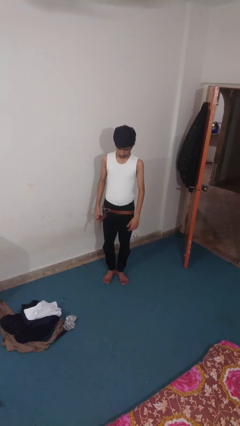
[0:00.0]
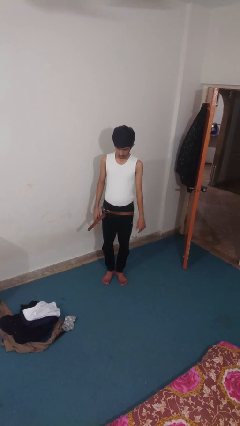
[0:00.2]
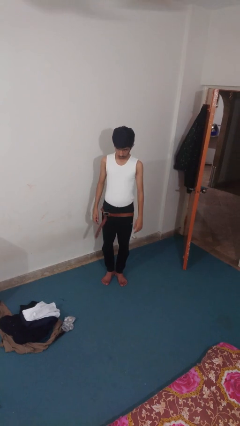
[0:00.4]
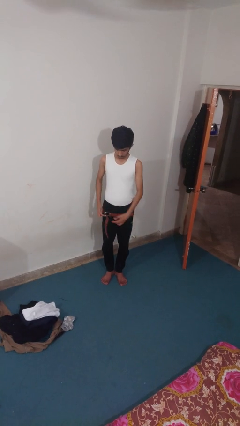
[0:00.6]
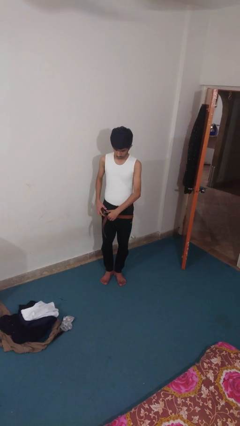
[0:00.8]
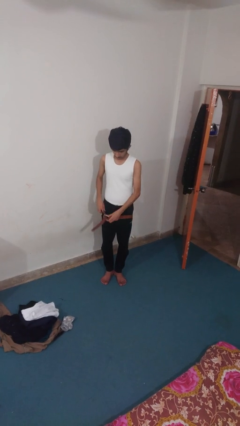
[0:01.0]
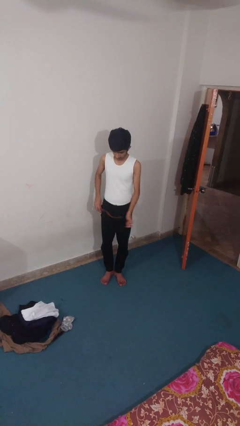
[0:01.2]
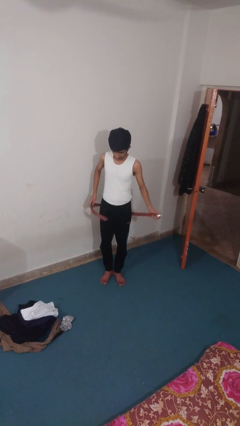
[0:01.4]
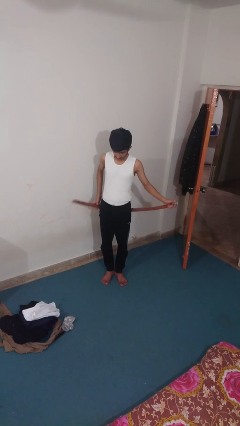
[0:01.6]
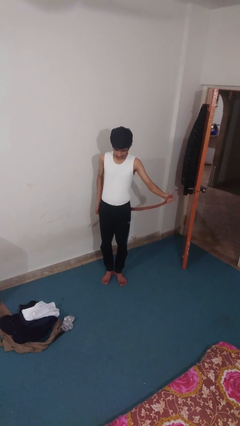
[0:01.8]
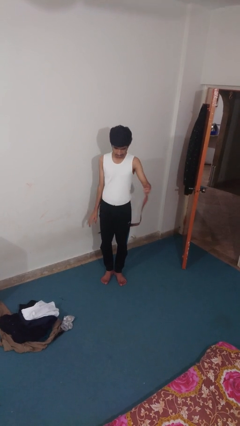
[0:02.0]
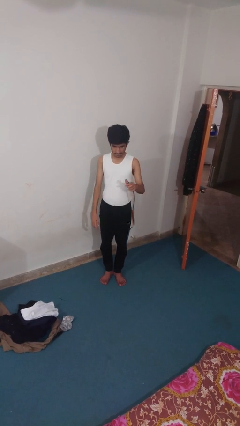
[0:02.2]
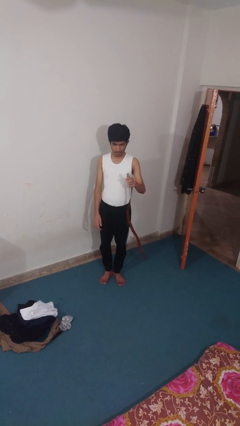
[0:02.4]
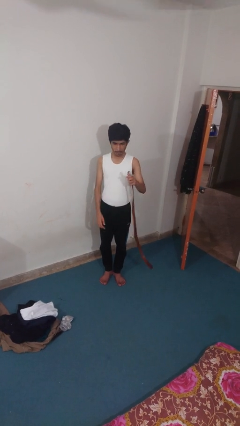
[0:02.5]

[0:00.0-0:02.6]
person takes off belt

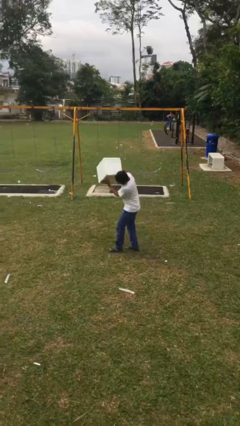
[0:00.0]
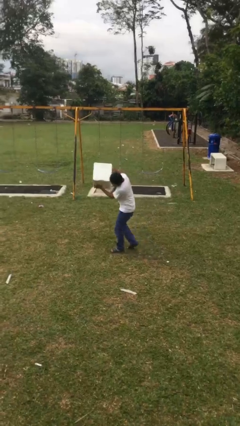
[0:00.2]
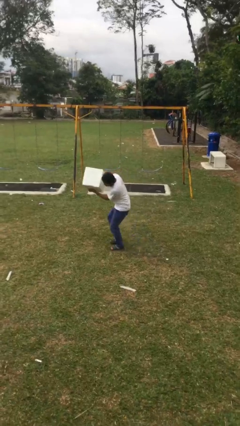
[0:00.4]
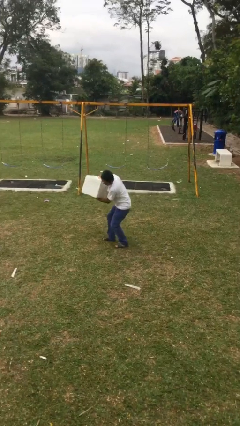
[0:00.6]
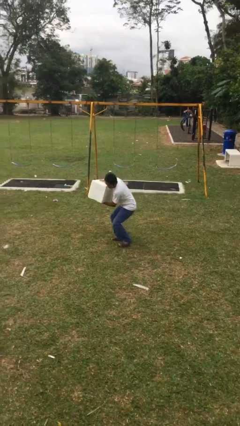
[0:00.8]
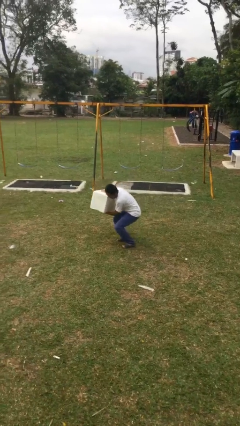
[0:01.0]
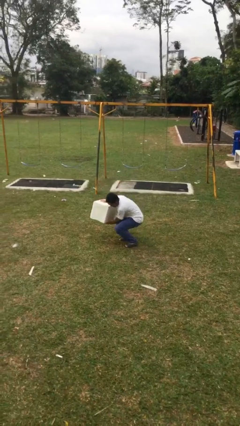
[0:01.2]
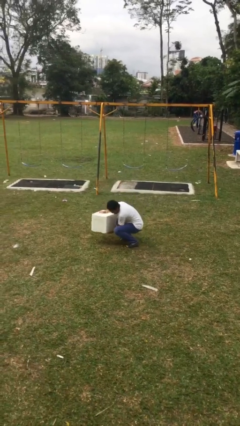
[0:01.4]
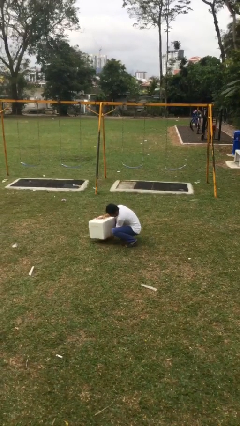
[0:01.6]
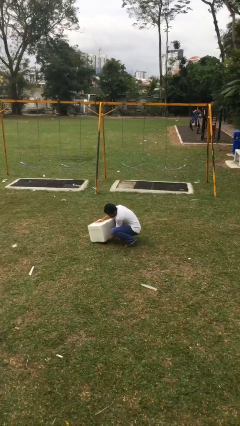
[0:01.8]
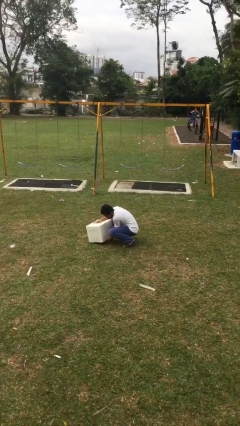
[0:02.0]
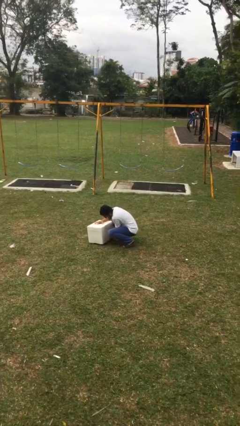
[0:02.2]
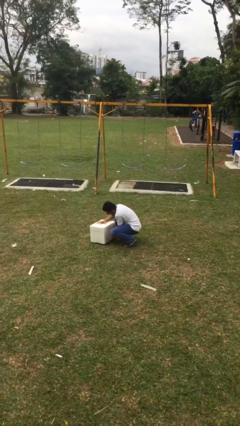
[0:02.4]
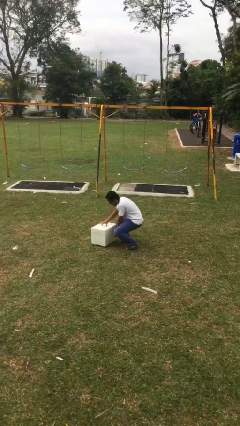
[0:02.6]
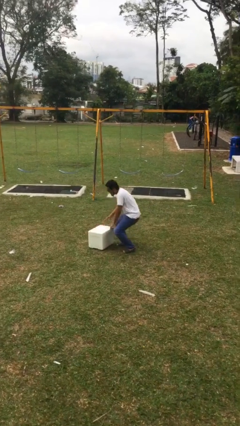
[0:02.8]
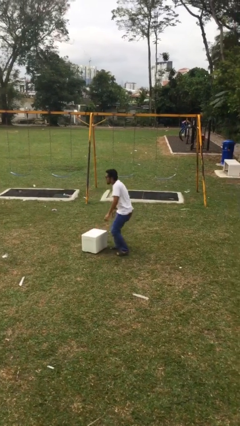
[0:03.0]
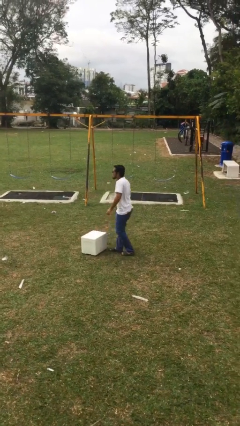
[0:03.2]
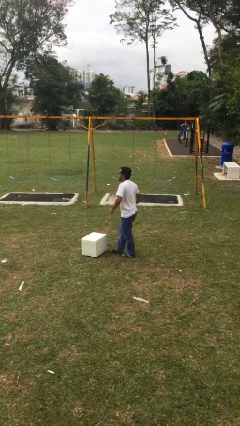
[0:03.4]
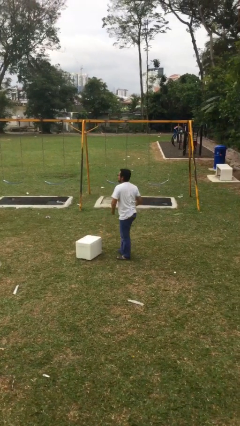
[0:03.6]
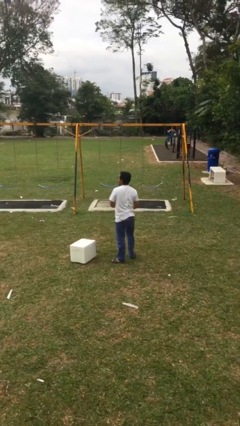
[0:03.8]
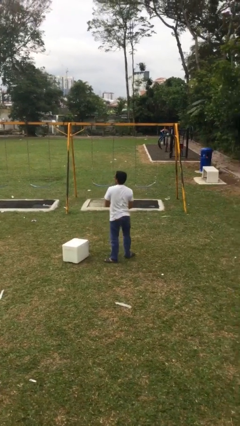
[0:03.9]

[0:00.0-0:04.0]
person puts down object on floor

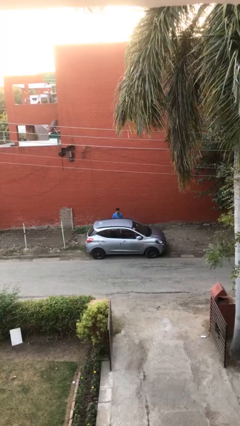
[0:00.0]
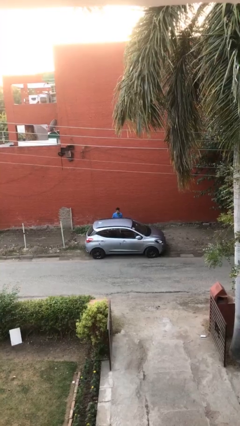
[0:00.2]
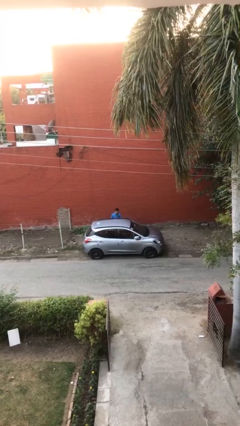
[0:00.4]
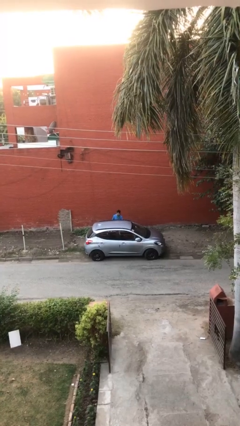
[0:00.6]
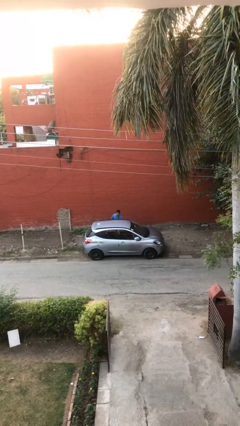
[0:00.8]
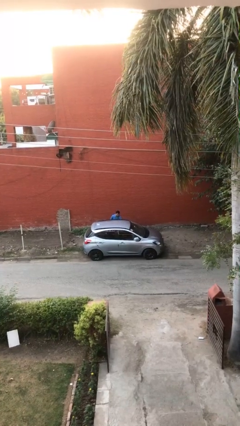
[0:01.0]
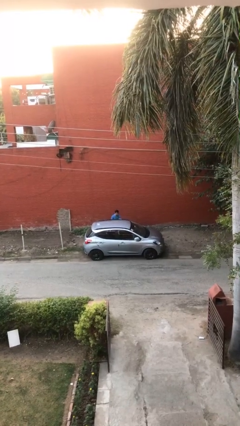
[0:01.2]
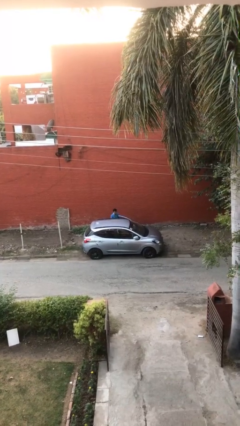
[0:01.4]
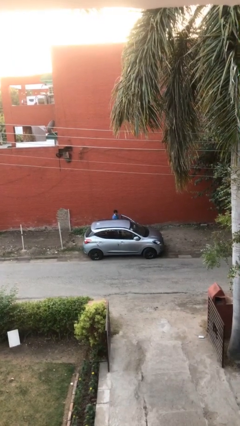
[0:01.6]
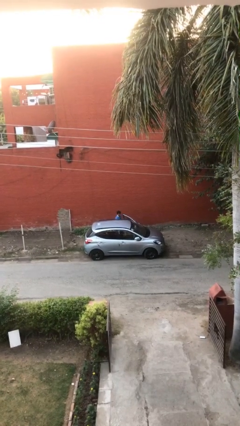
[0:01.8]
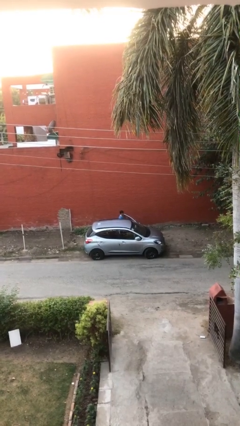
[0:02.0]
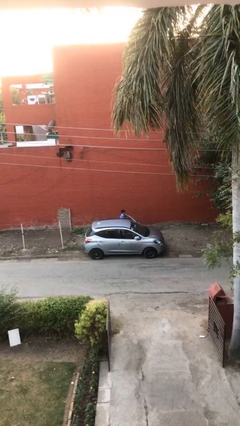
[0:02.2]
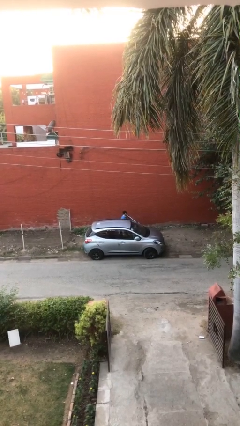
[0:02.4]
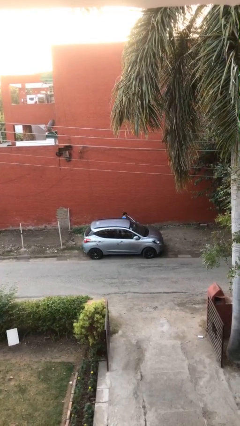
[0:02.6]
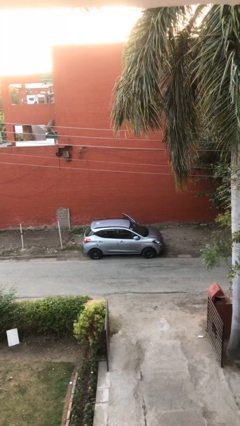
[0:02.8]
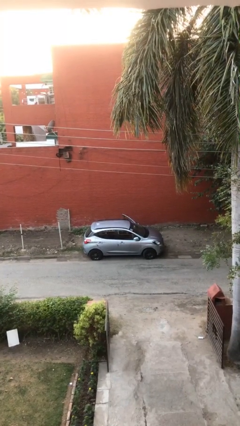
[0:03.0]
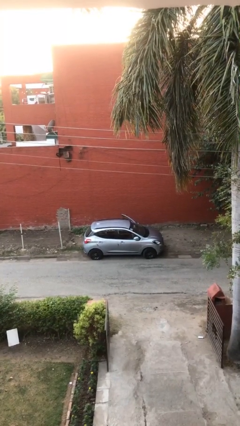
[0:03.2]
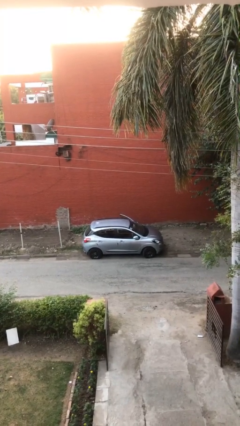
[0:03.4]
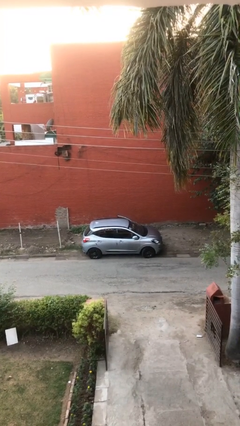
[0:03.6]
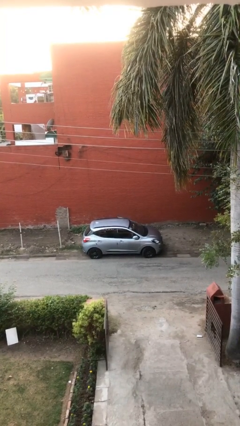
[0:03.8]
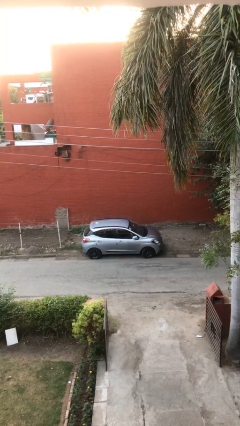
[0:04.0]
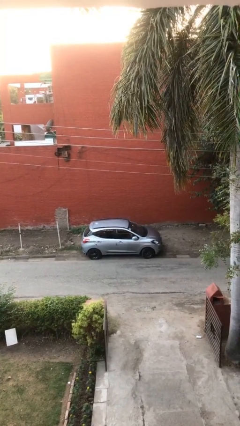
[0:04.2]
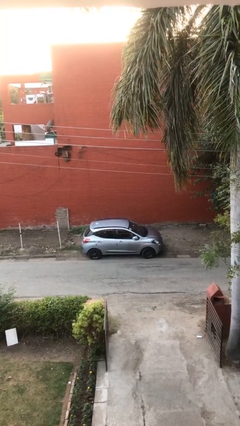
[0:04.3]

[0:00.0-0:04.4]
person enters car

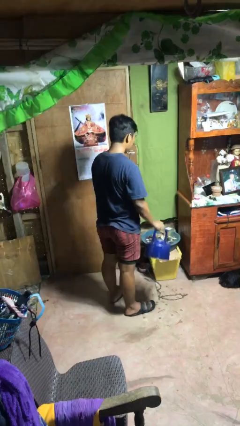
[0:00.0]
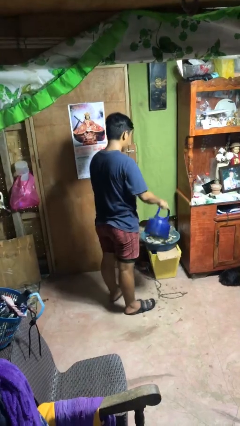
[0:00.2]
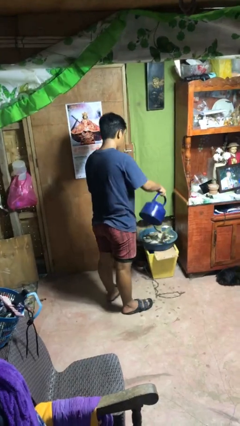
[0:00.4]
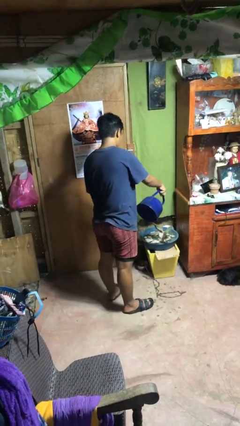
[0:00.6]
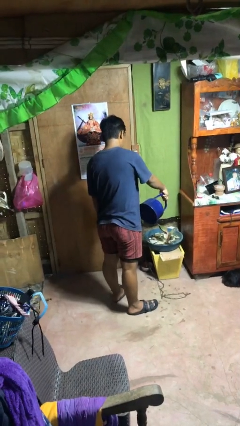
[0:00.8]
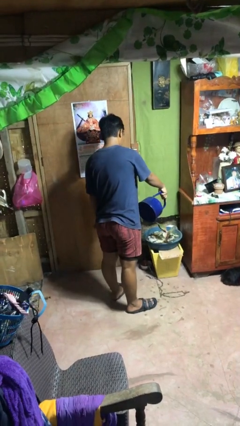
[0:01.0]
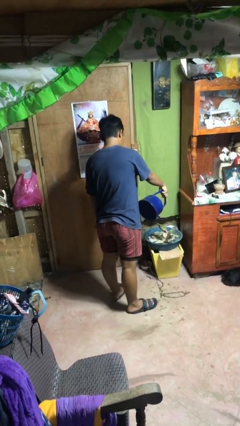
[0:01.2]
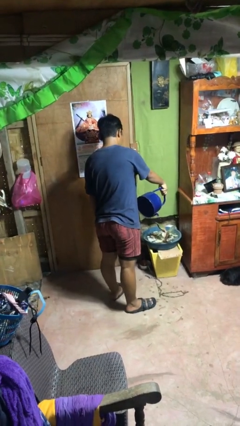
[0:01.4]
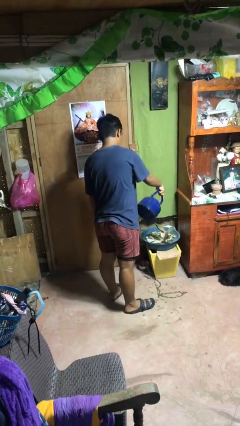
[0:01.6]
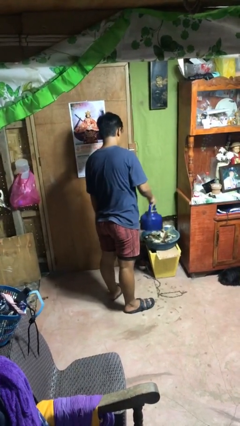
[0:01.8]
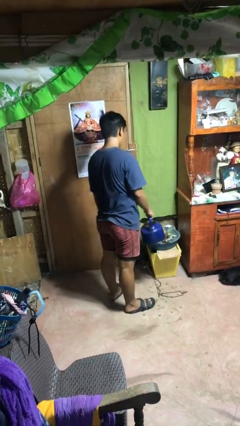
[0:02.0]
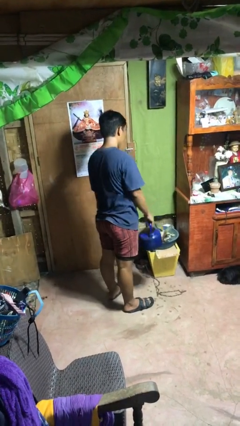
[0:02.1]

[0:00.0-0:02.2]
person waters houseplant

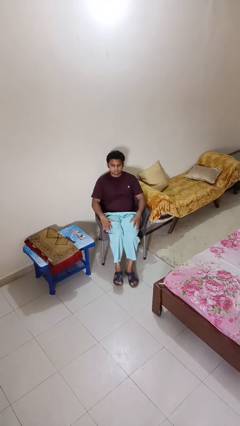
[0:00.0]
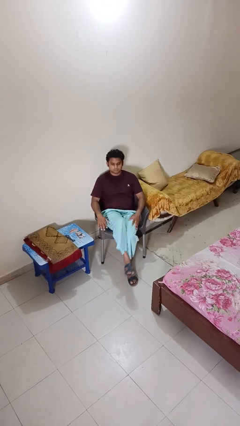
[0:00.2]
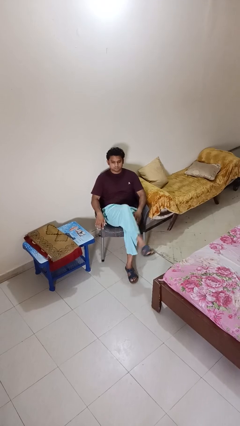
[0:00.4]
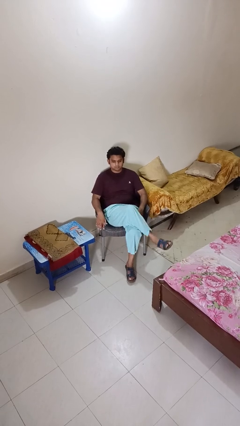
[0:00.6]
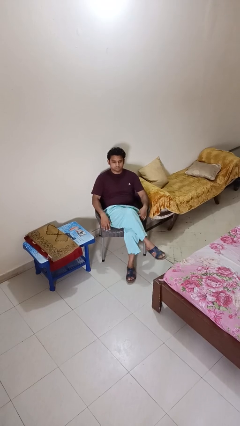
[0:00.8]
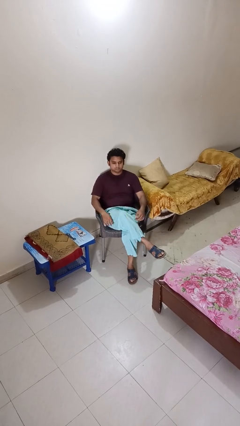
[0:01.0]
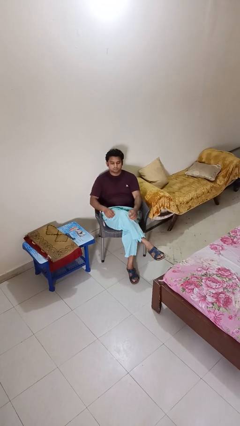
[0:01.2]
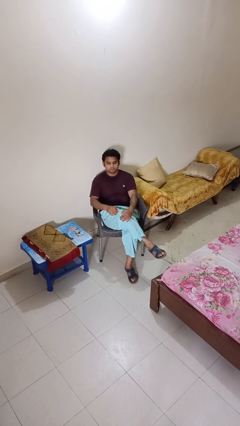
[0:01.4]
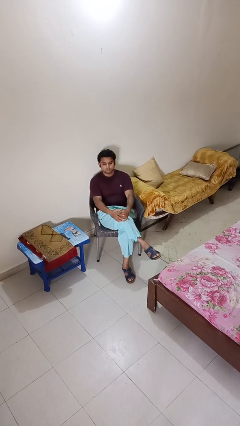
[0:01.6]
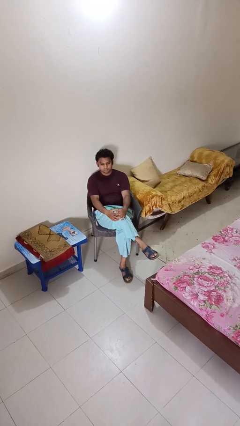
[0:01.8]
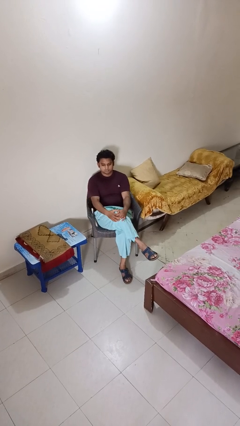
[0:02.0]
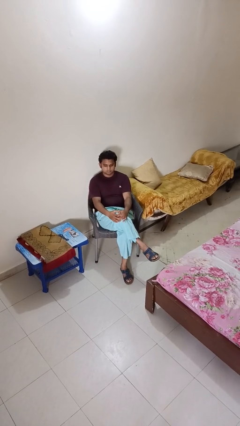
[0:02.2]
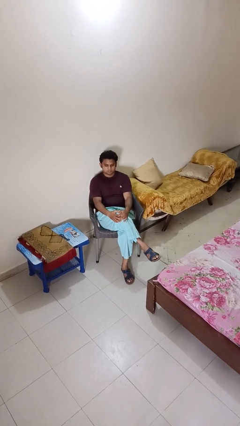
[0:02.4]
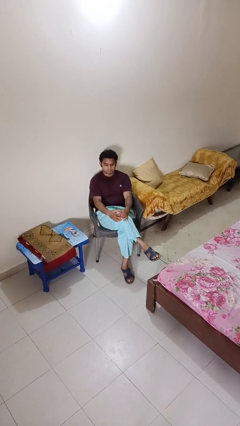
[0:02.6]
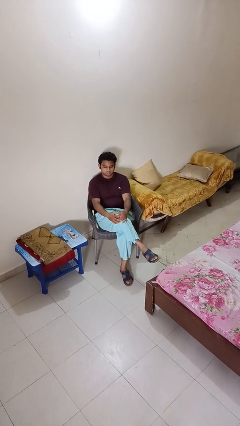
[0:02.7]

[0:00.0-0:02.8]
person crosses legs

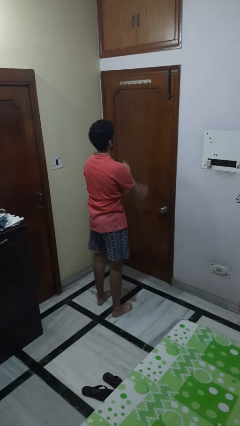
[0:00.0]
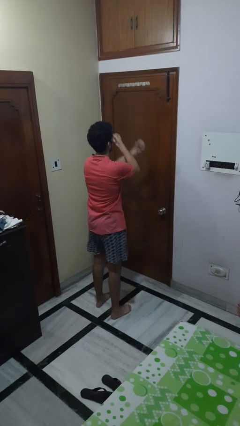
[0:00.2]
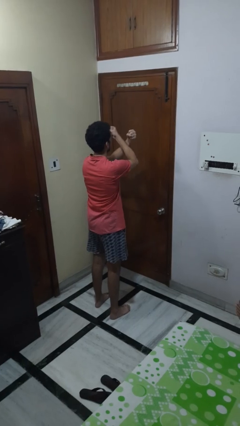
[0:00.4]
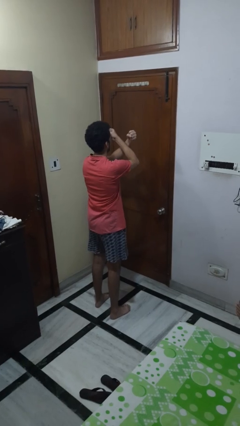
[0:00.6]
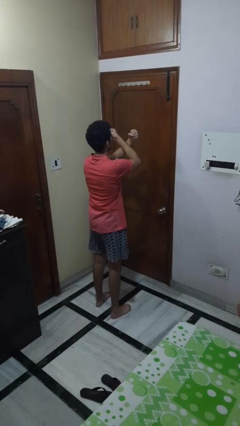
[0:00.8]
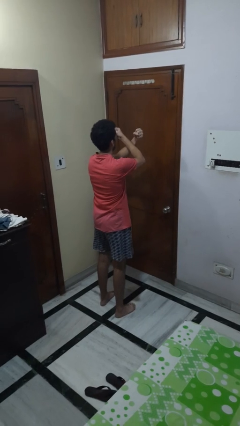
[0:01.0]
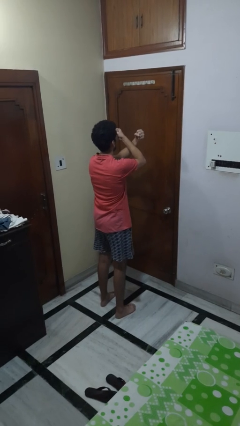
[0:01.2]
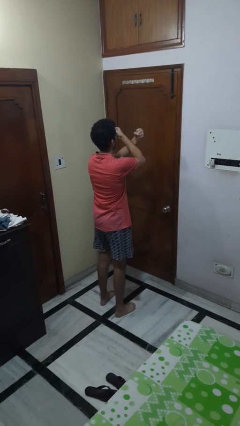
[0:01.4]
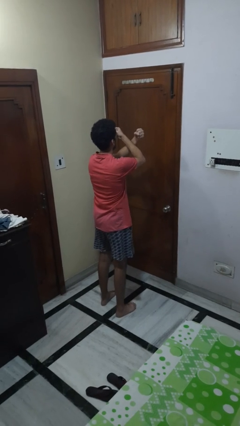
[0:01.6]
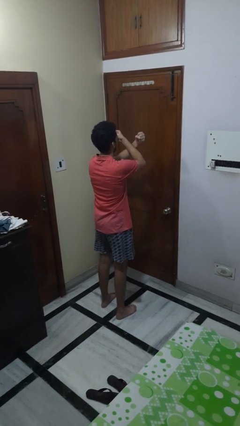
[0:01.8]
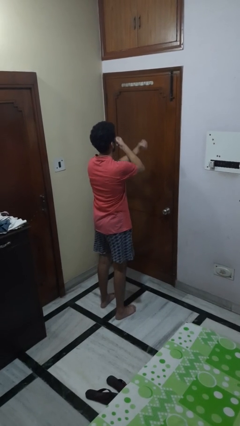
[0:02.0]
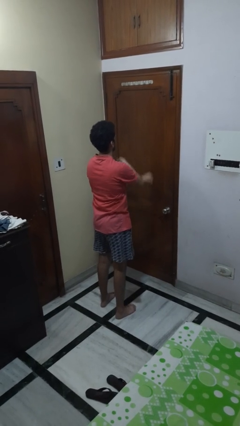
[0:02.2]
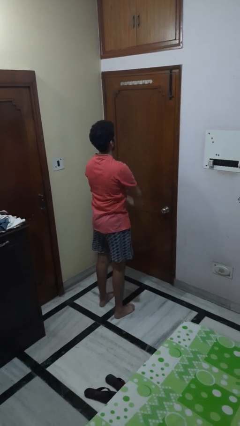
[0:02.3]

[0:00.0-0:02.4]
person gestures arms x
